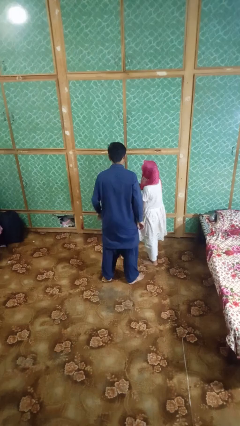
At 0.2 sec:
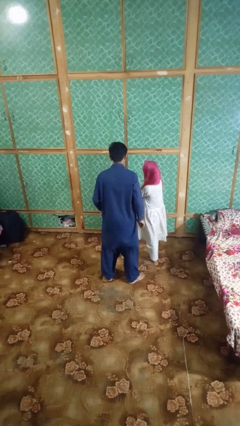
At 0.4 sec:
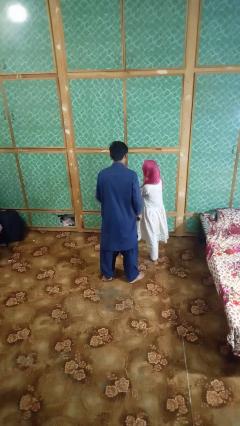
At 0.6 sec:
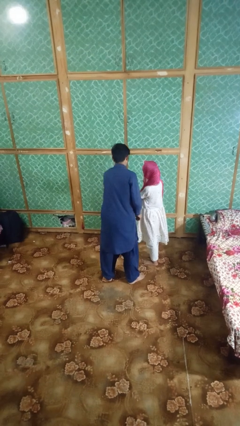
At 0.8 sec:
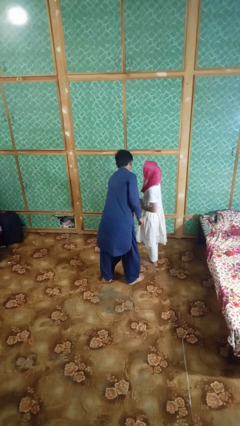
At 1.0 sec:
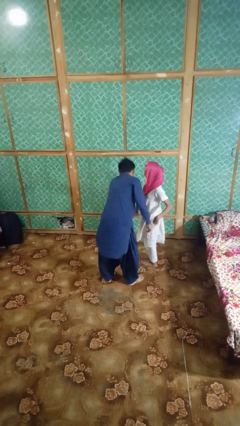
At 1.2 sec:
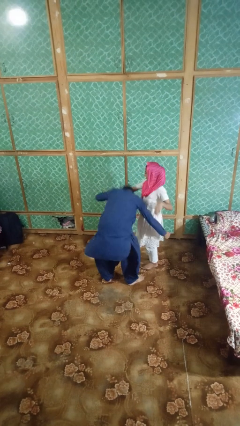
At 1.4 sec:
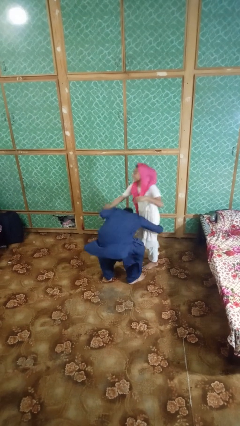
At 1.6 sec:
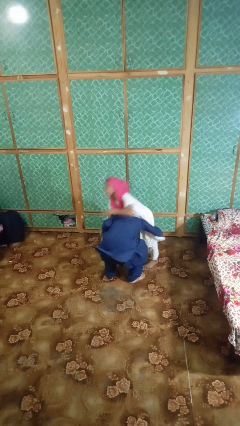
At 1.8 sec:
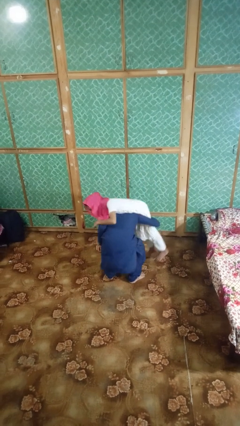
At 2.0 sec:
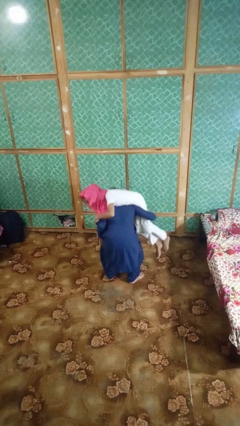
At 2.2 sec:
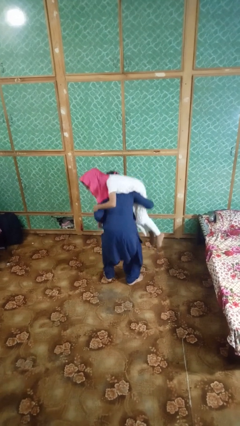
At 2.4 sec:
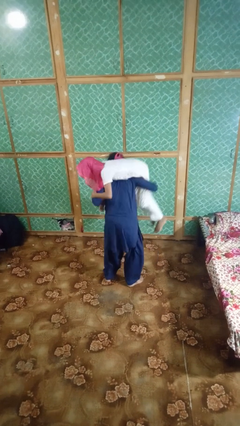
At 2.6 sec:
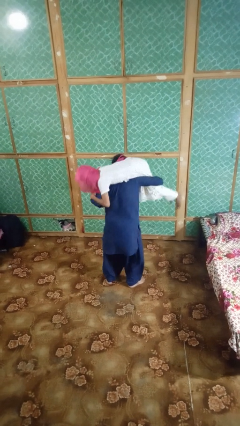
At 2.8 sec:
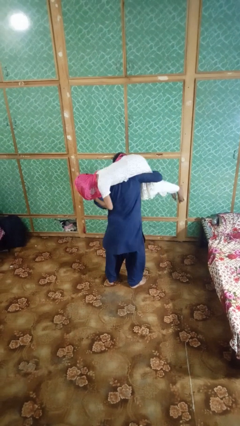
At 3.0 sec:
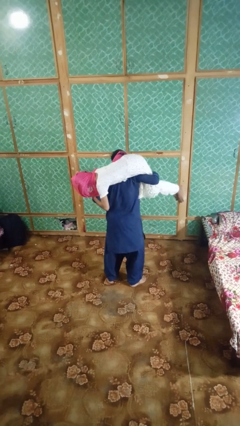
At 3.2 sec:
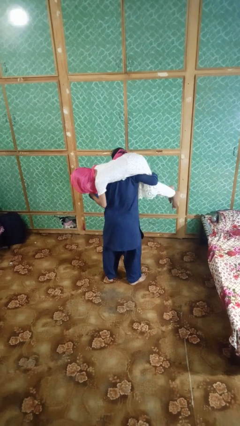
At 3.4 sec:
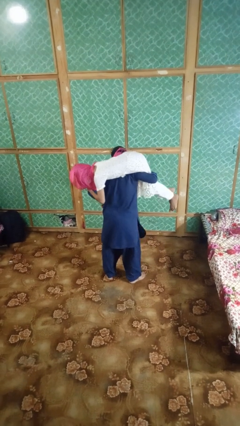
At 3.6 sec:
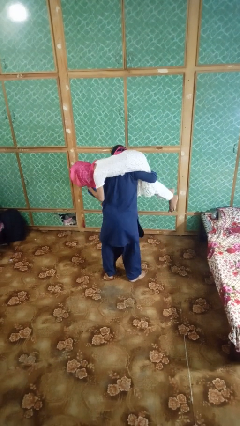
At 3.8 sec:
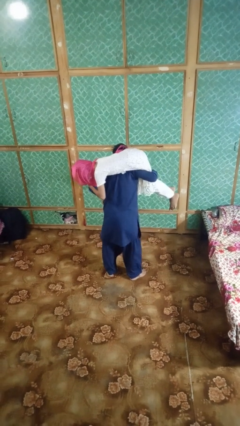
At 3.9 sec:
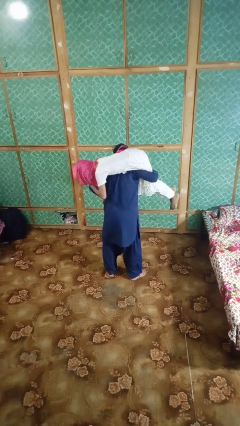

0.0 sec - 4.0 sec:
person carries person on shoulders

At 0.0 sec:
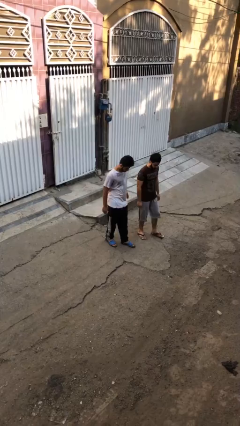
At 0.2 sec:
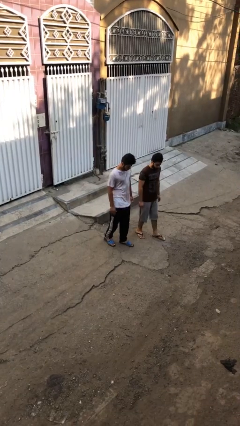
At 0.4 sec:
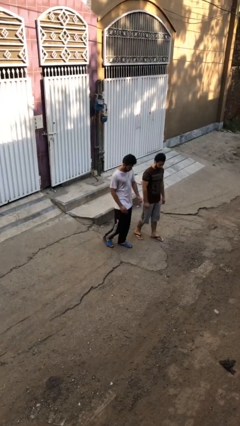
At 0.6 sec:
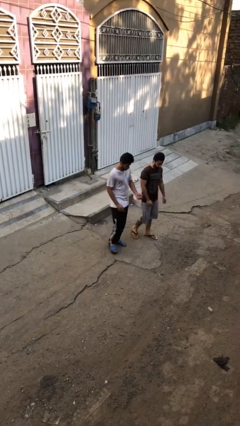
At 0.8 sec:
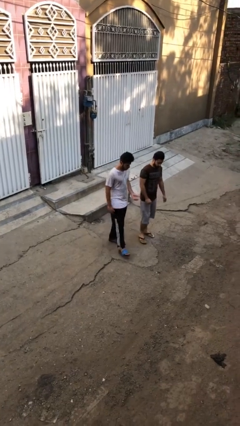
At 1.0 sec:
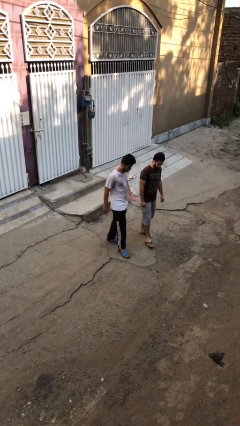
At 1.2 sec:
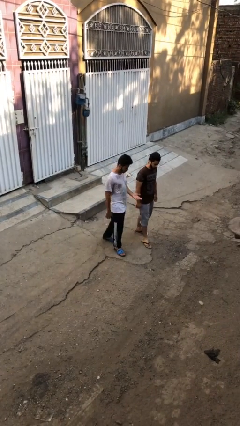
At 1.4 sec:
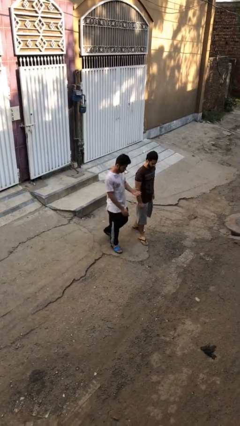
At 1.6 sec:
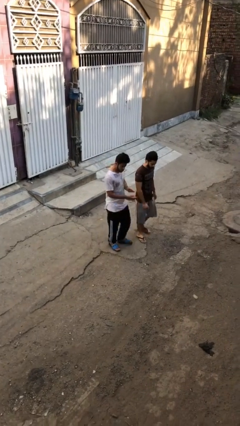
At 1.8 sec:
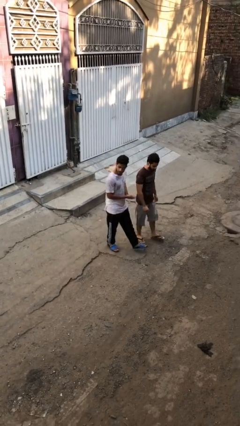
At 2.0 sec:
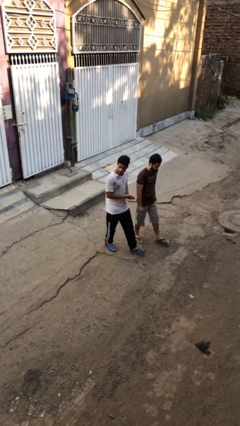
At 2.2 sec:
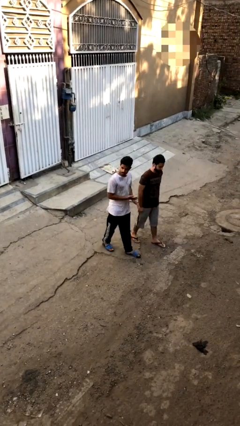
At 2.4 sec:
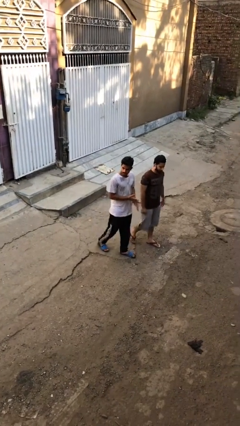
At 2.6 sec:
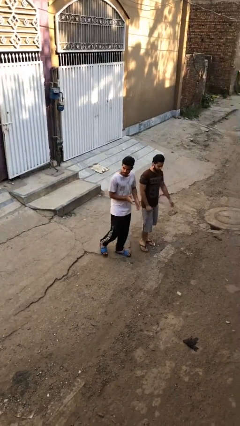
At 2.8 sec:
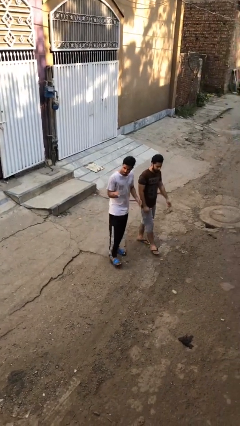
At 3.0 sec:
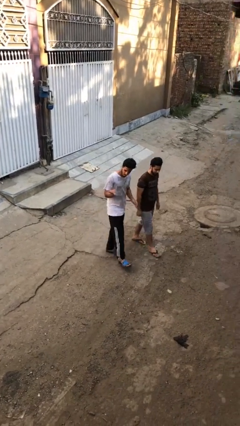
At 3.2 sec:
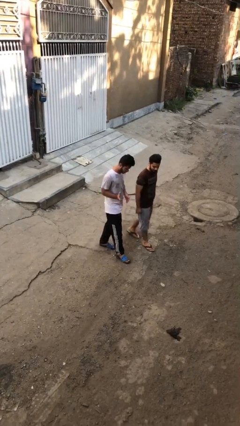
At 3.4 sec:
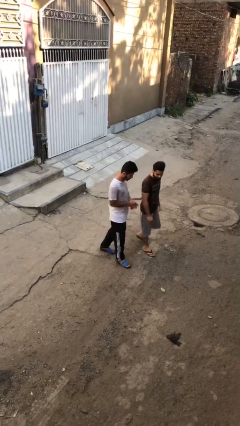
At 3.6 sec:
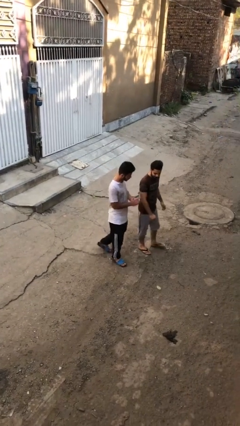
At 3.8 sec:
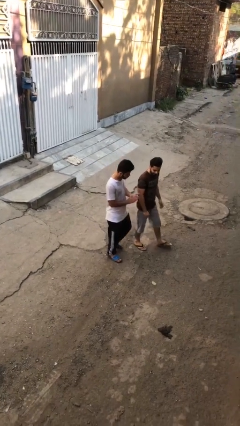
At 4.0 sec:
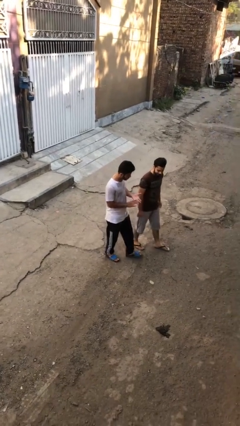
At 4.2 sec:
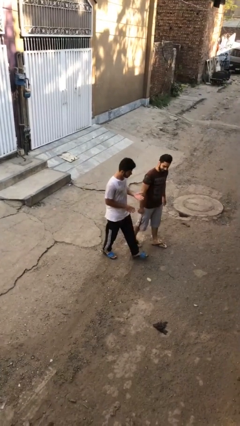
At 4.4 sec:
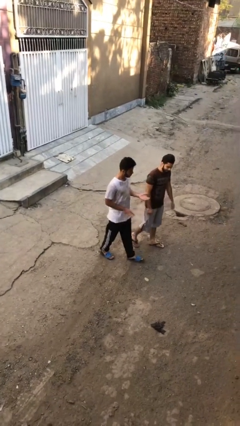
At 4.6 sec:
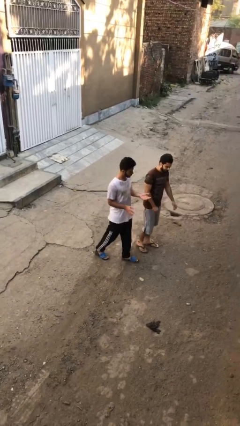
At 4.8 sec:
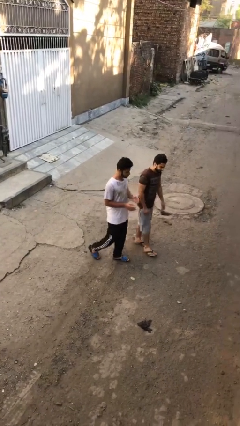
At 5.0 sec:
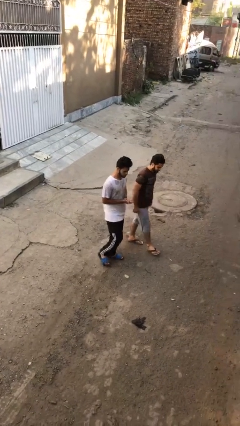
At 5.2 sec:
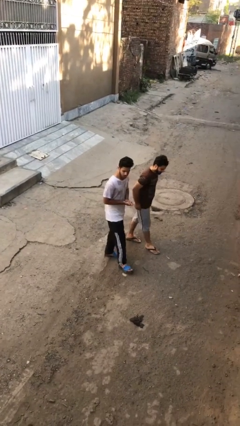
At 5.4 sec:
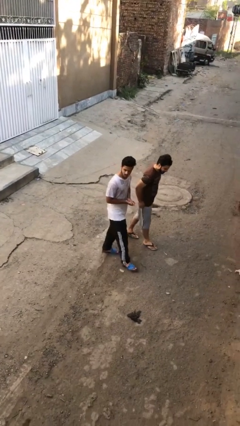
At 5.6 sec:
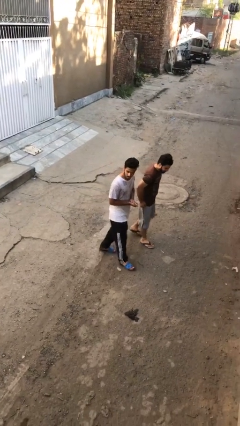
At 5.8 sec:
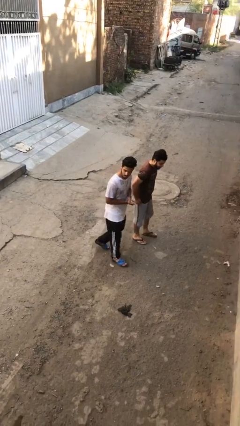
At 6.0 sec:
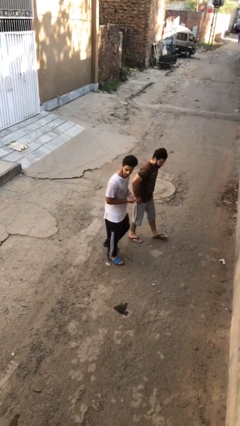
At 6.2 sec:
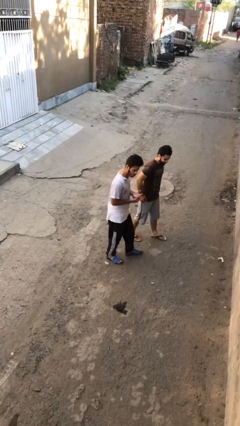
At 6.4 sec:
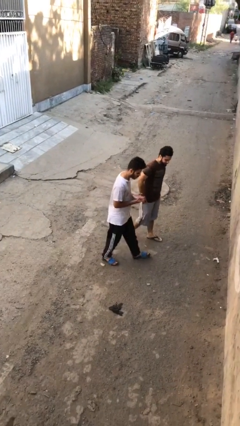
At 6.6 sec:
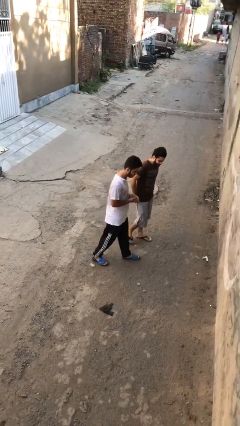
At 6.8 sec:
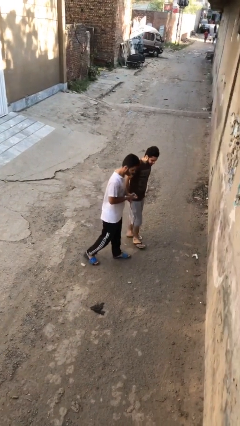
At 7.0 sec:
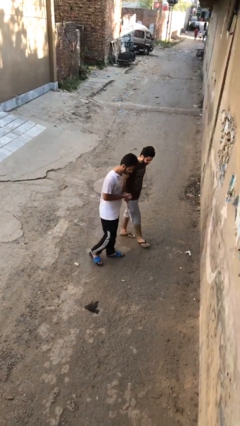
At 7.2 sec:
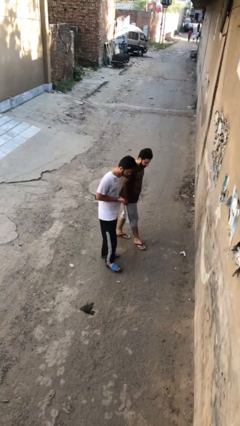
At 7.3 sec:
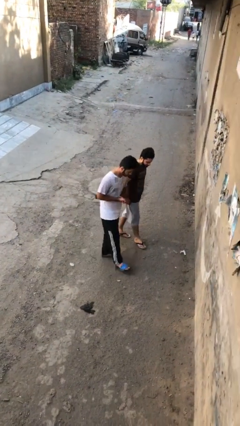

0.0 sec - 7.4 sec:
person talks to person

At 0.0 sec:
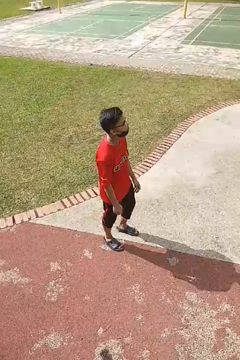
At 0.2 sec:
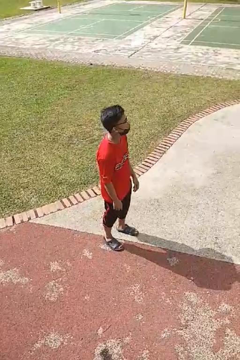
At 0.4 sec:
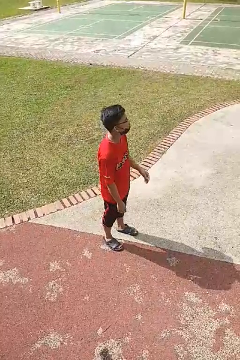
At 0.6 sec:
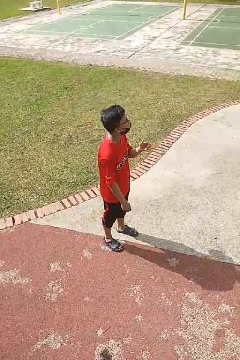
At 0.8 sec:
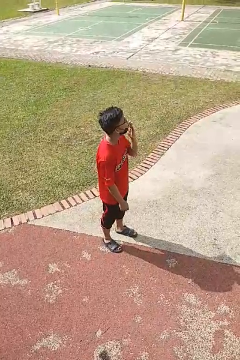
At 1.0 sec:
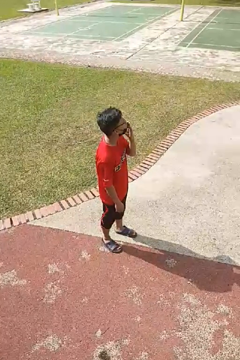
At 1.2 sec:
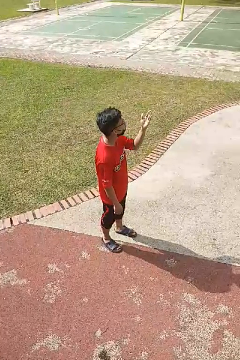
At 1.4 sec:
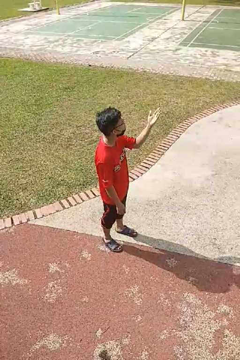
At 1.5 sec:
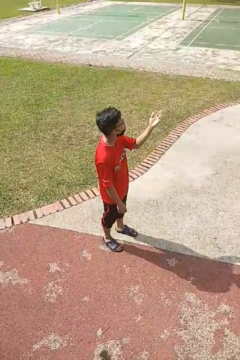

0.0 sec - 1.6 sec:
person gestures blow kiss

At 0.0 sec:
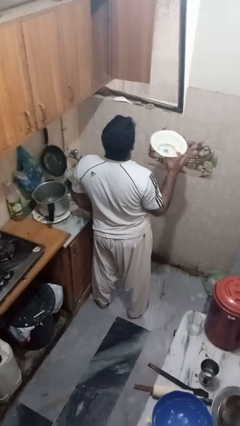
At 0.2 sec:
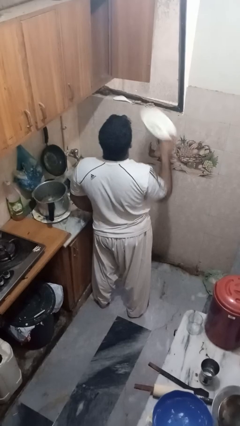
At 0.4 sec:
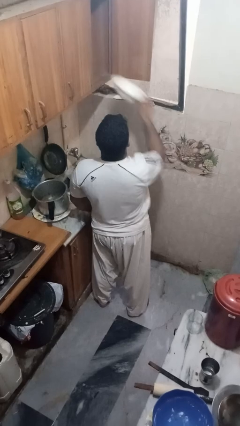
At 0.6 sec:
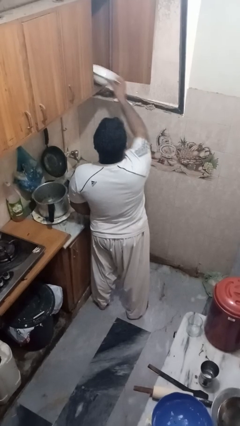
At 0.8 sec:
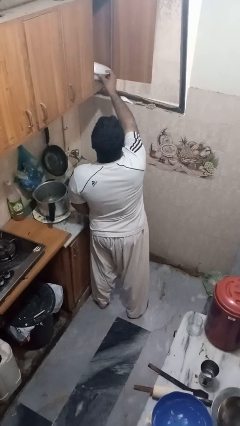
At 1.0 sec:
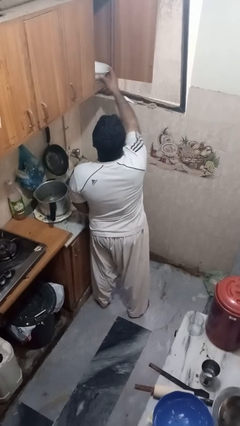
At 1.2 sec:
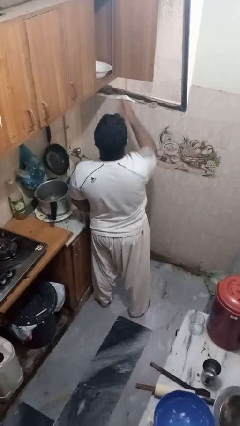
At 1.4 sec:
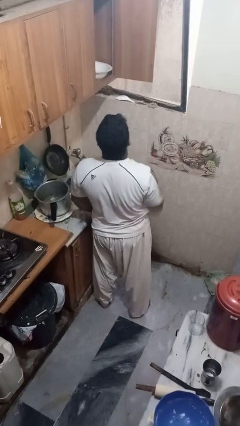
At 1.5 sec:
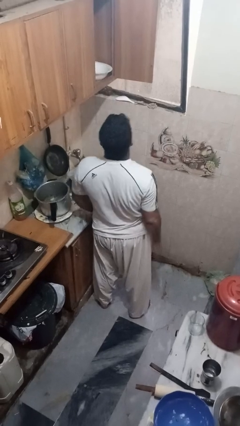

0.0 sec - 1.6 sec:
person puts object in cabinet

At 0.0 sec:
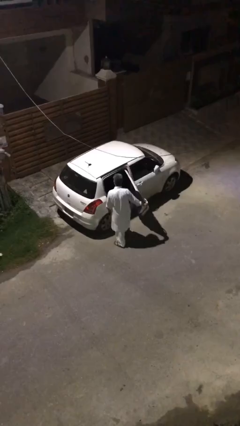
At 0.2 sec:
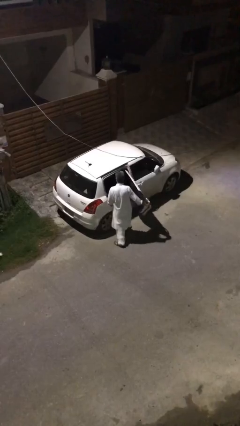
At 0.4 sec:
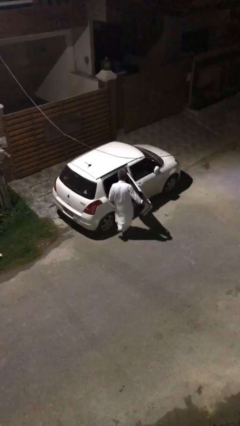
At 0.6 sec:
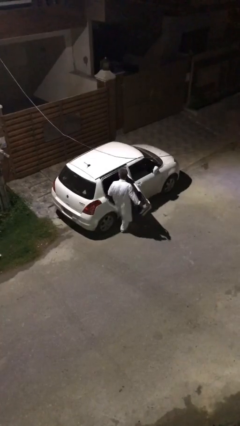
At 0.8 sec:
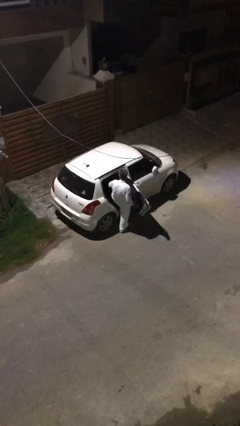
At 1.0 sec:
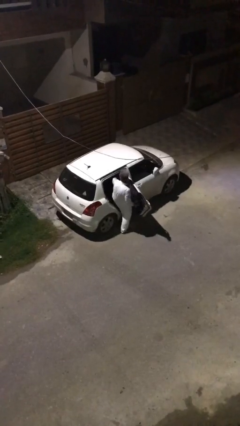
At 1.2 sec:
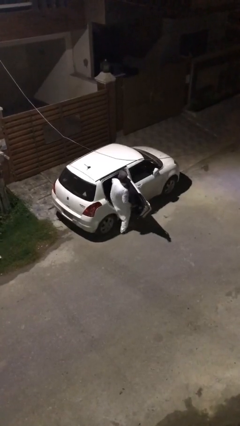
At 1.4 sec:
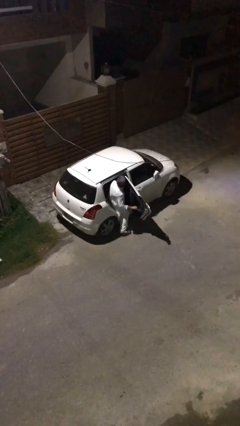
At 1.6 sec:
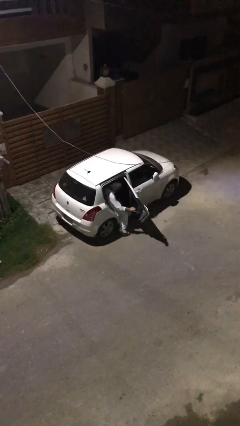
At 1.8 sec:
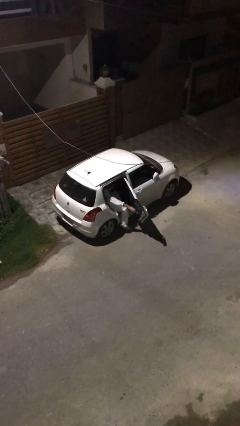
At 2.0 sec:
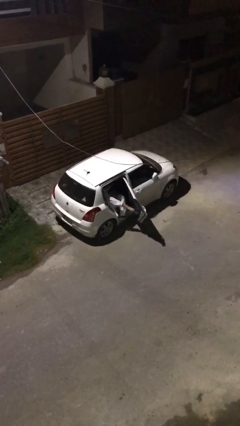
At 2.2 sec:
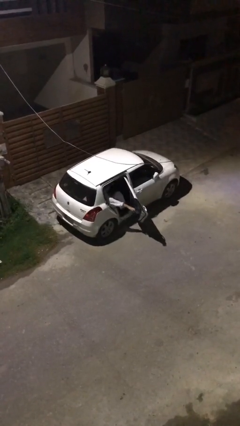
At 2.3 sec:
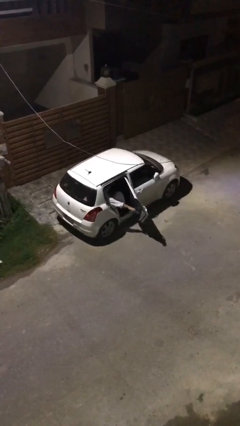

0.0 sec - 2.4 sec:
person enters car

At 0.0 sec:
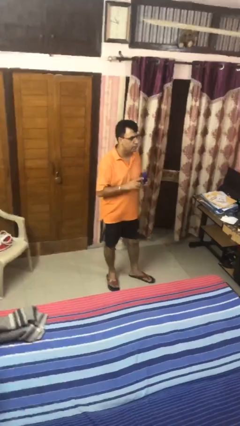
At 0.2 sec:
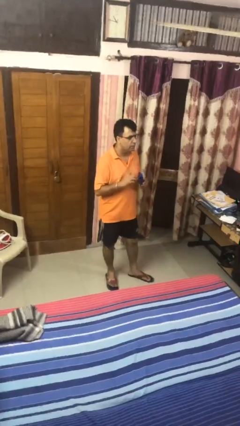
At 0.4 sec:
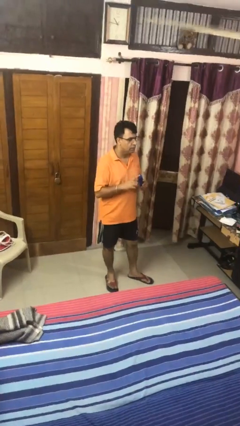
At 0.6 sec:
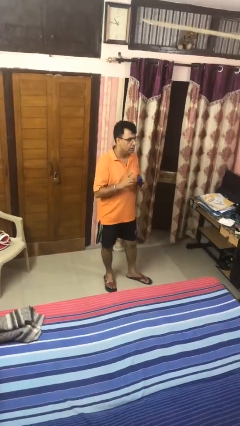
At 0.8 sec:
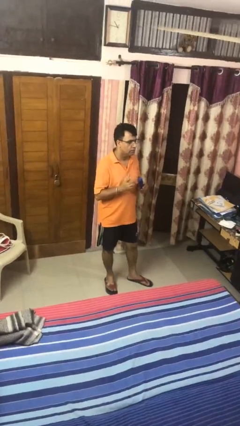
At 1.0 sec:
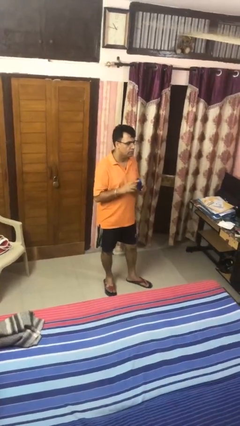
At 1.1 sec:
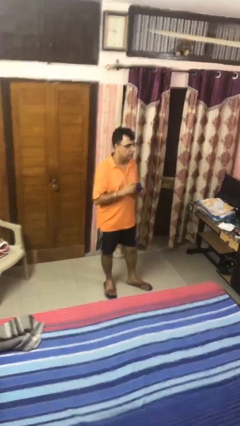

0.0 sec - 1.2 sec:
person taps object with finger
